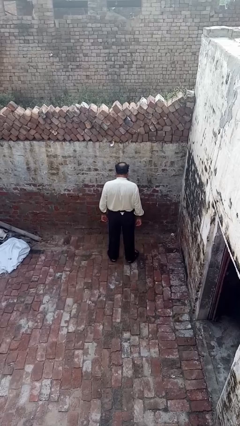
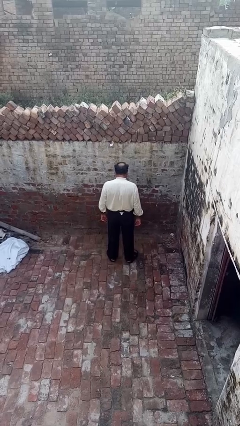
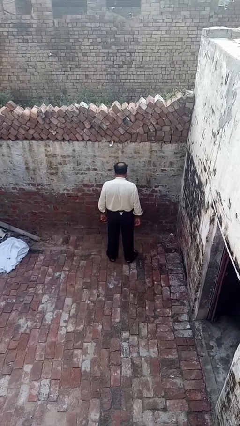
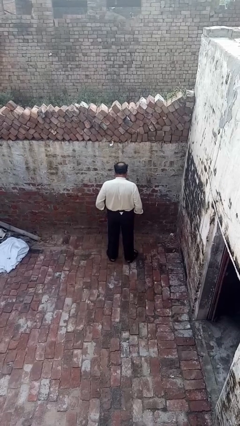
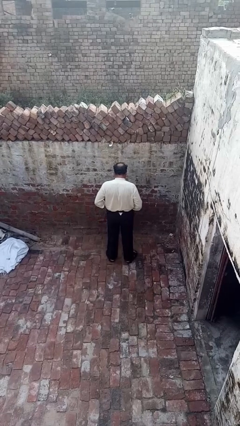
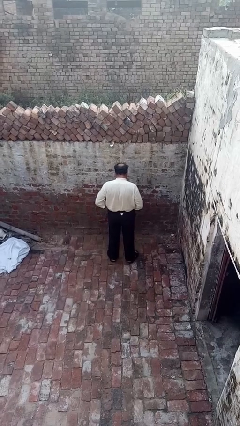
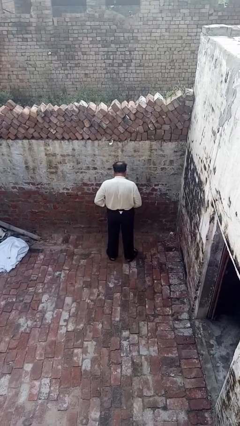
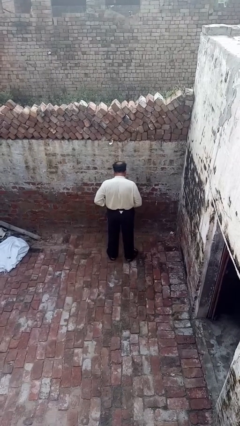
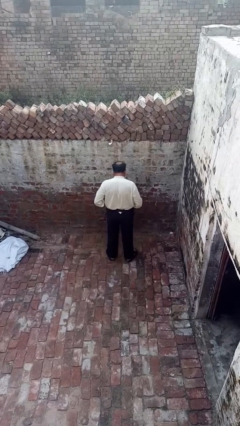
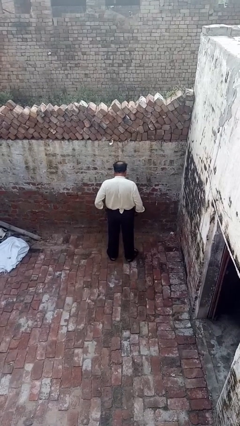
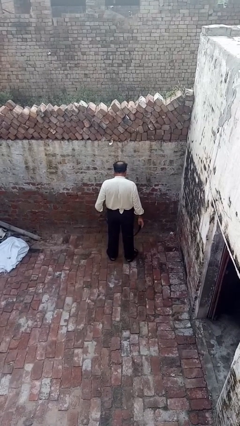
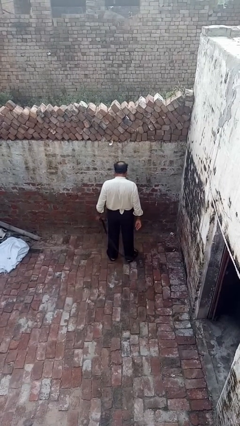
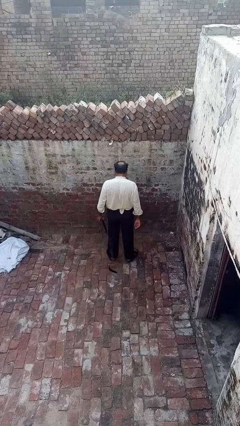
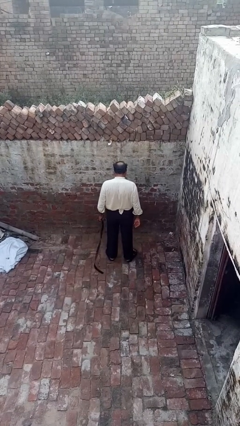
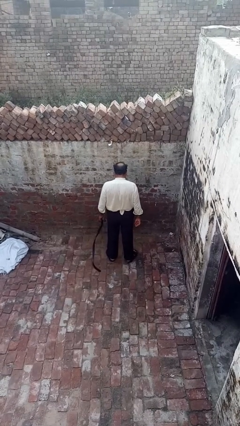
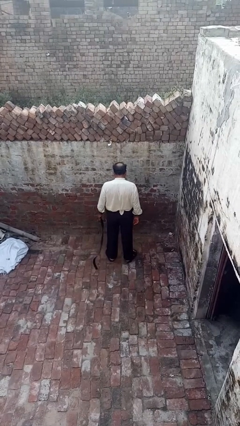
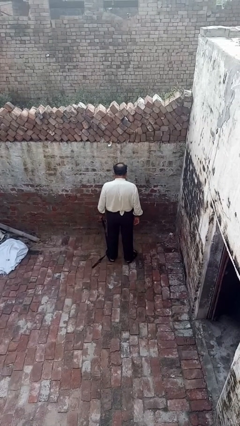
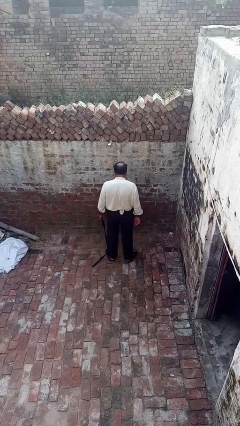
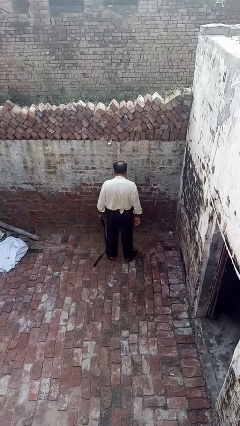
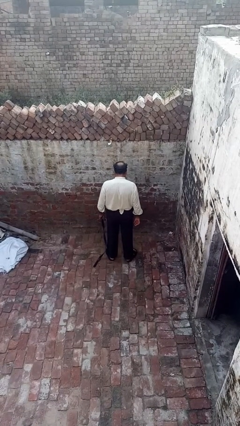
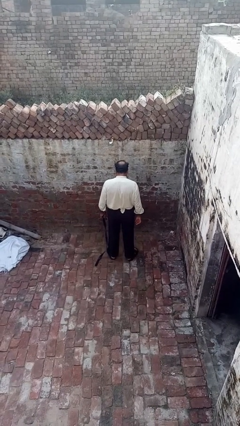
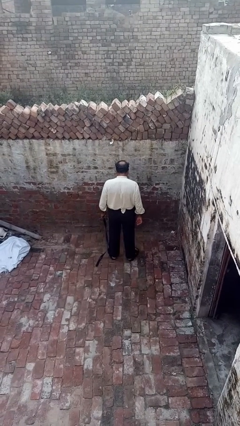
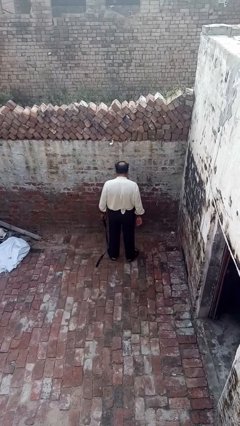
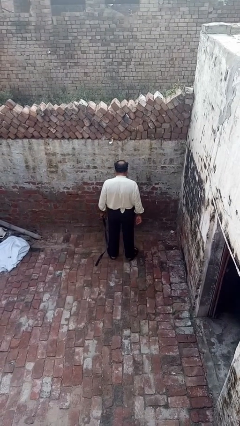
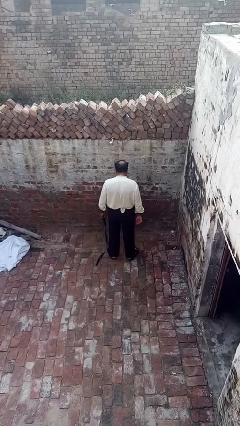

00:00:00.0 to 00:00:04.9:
person takes off belt

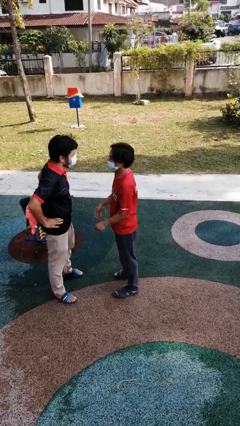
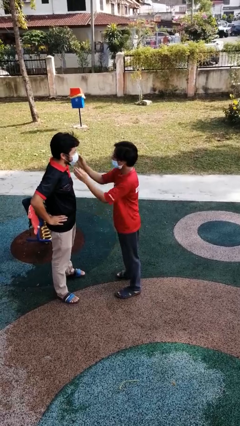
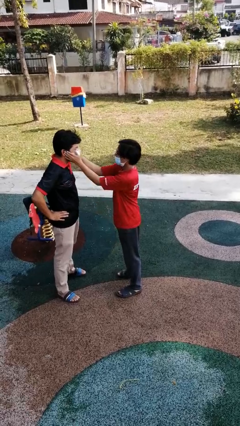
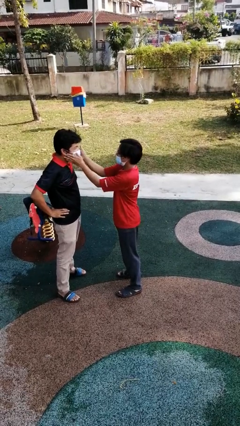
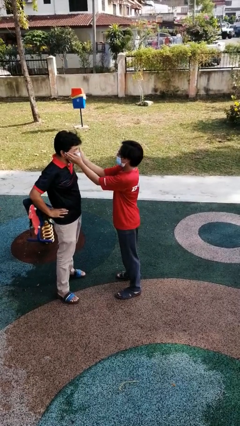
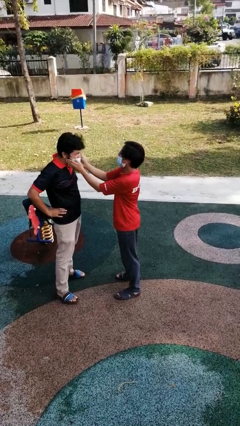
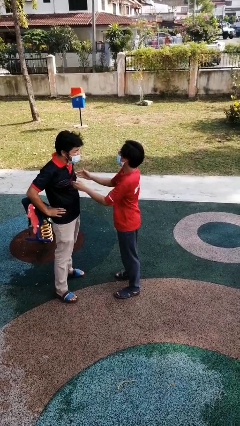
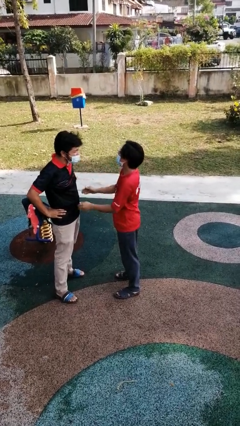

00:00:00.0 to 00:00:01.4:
person touches face of person

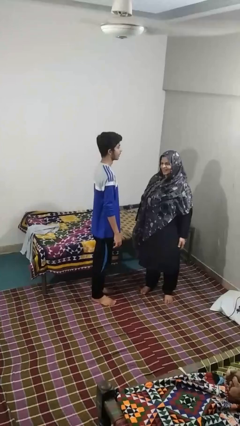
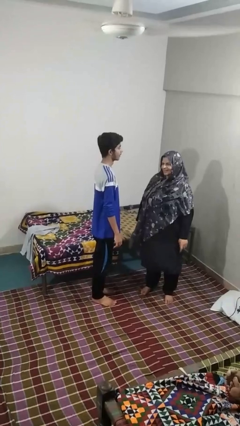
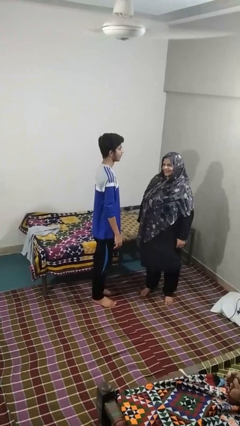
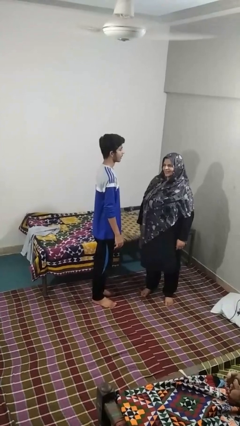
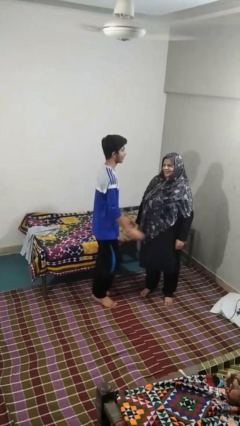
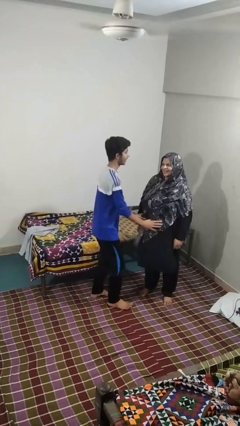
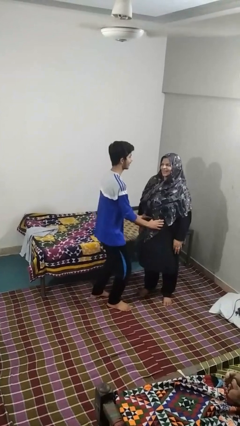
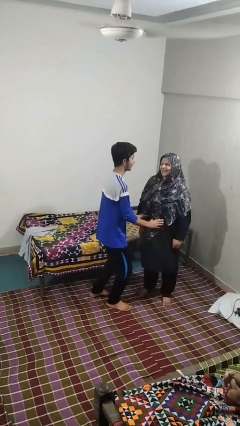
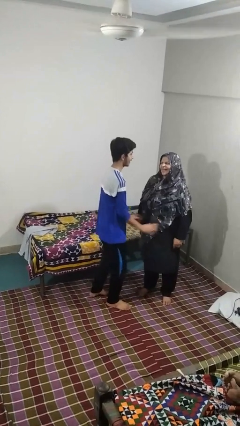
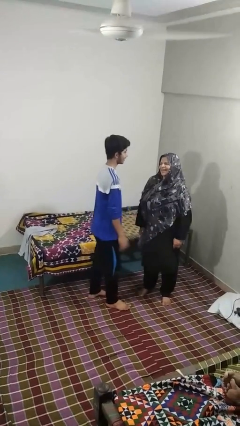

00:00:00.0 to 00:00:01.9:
person tickles person

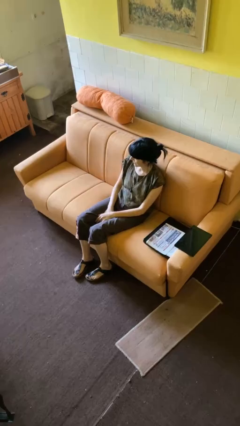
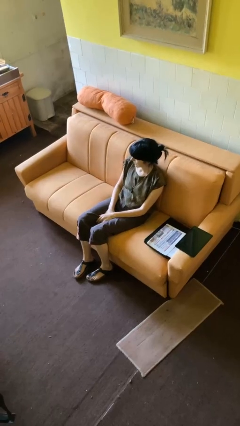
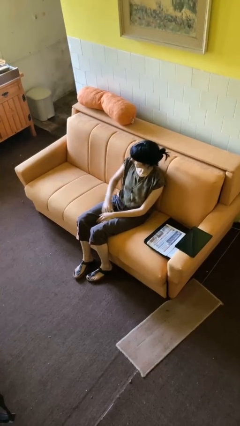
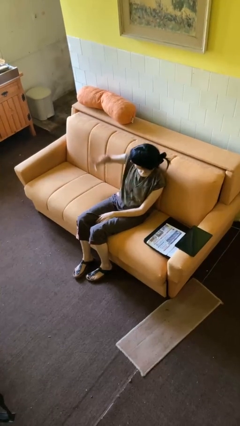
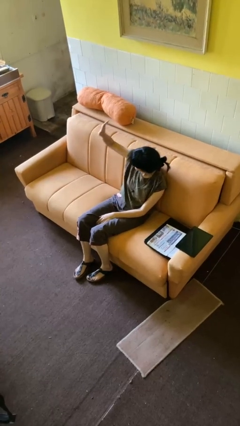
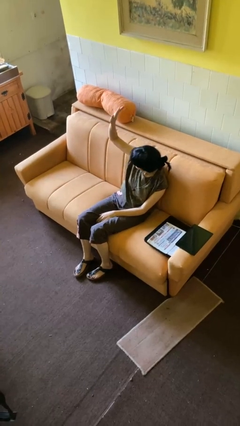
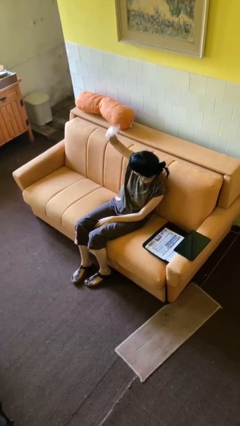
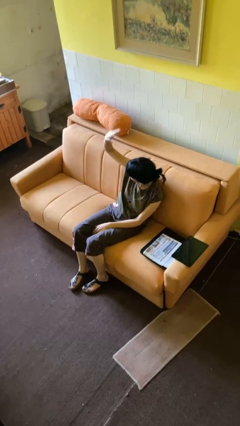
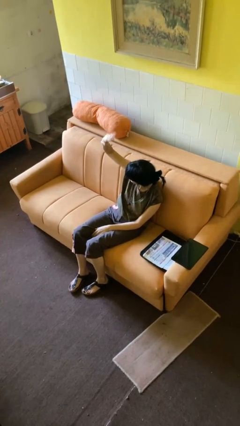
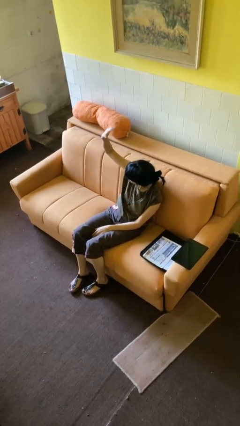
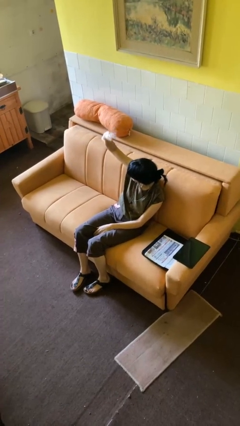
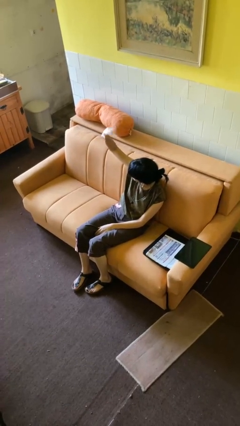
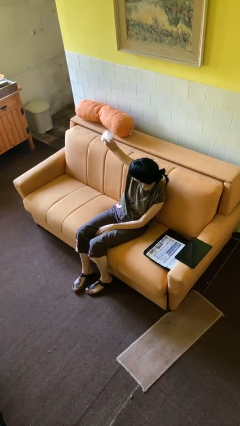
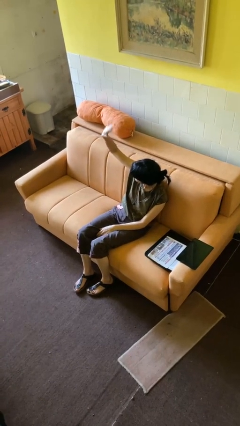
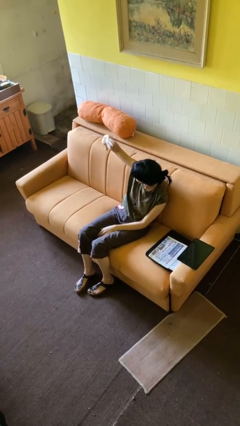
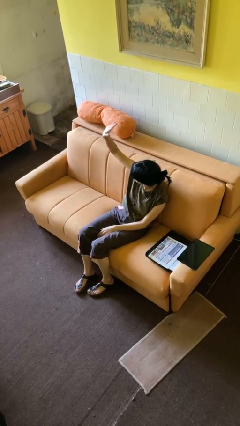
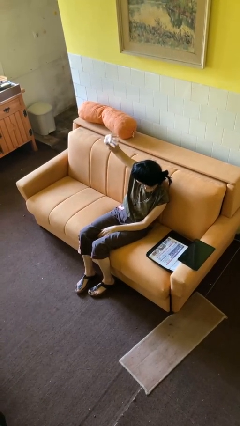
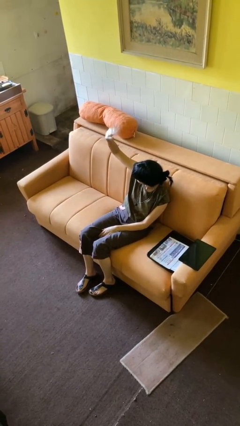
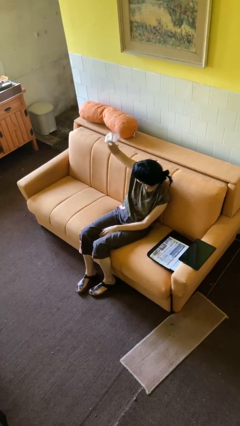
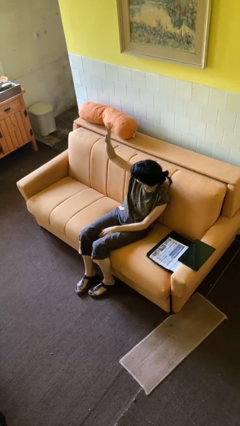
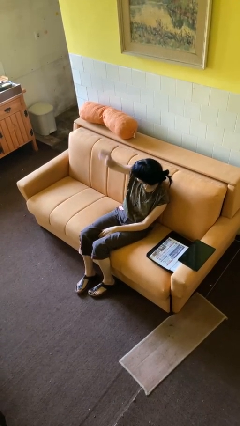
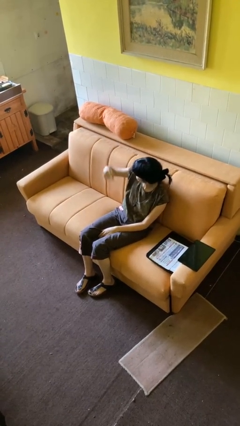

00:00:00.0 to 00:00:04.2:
person waves at person

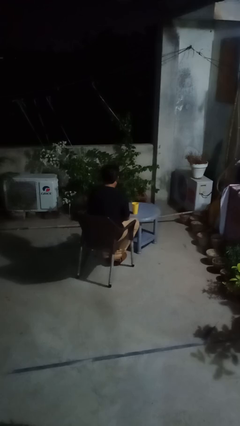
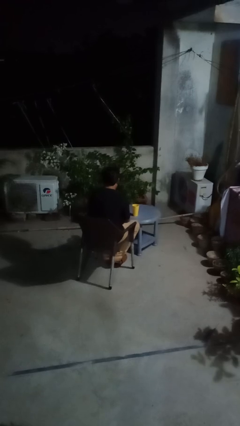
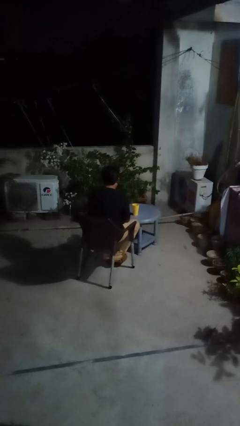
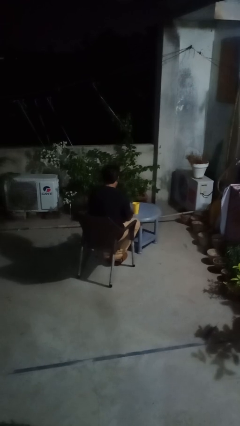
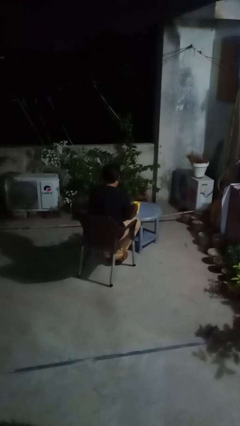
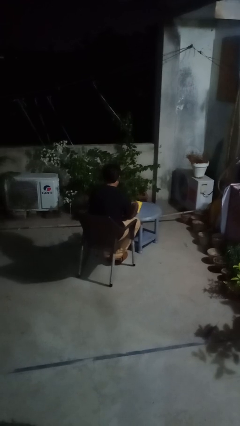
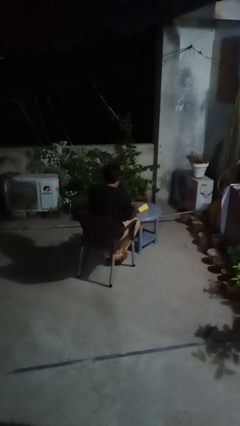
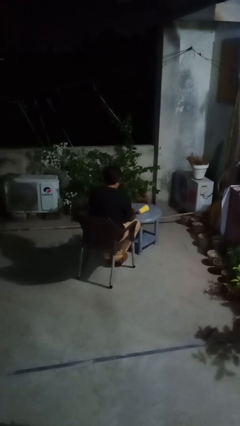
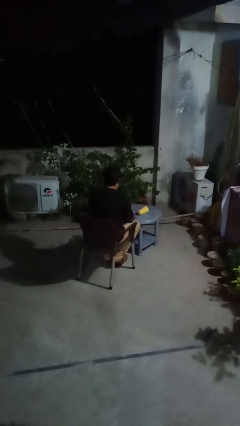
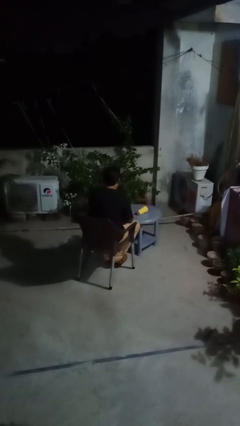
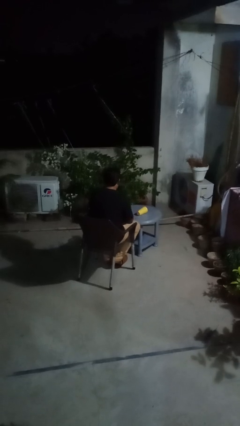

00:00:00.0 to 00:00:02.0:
person knocks over glass

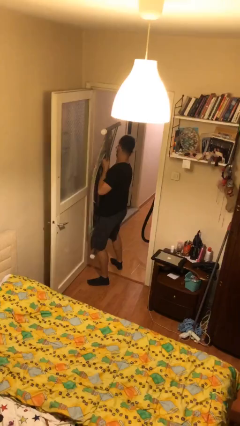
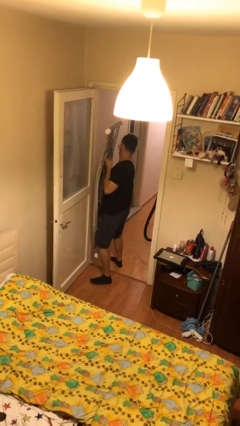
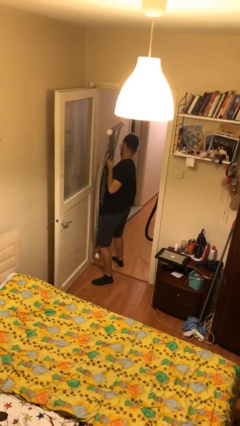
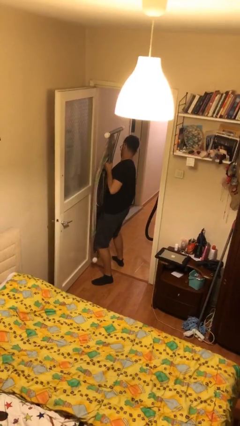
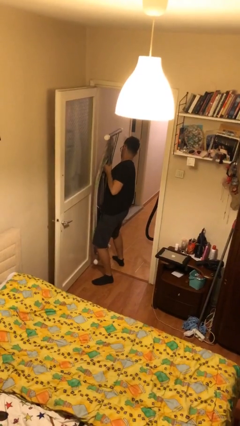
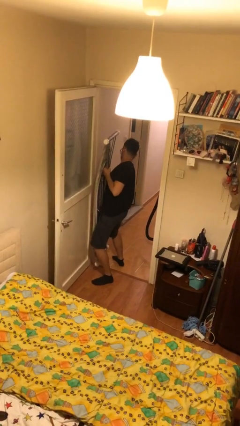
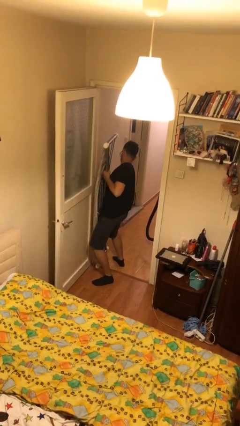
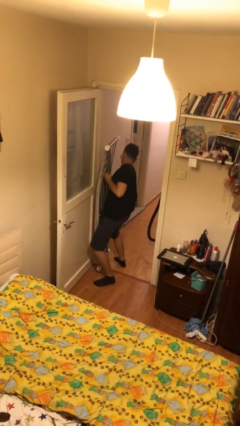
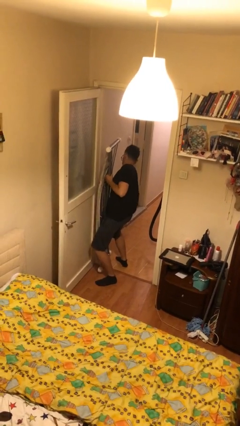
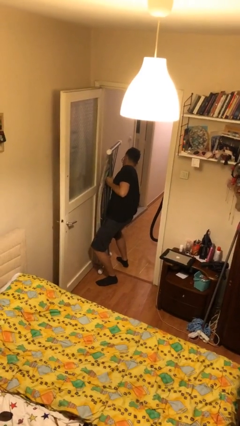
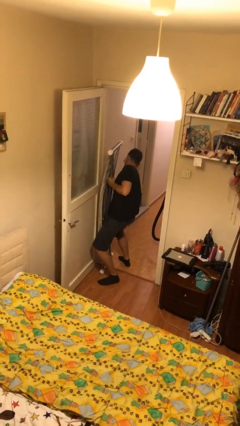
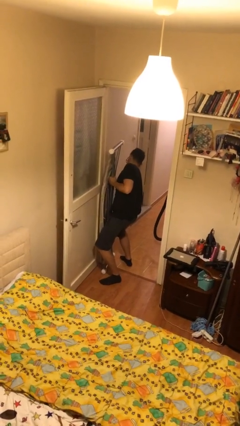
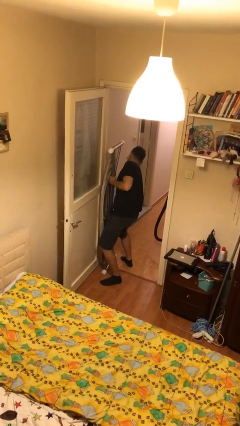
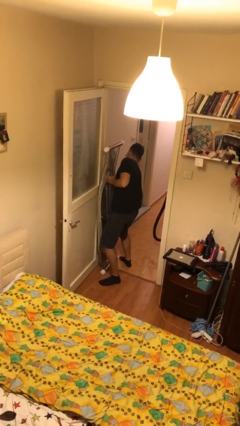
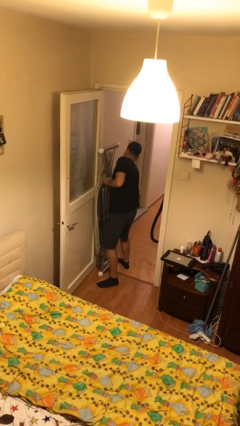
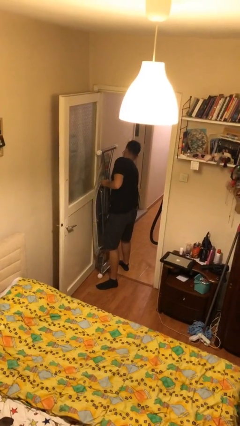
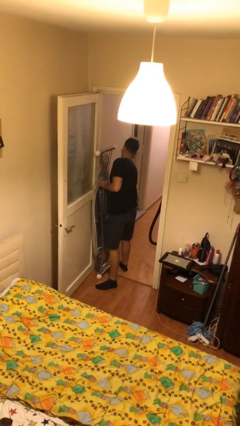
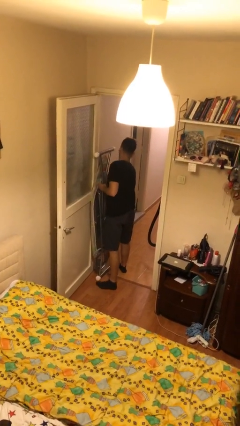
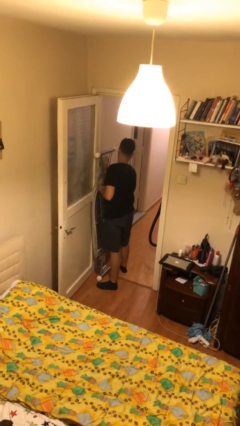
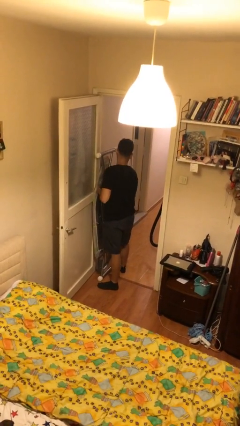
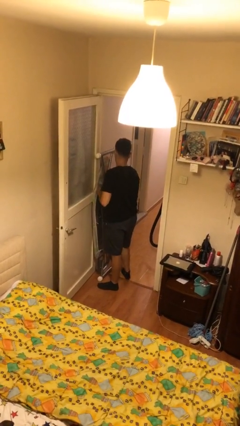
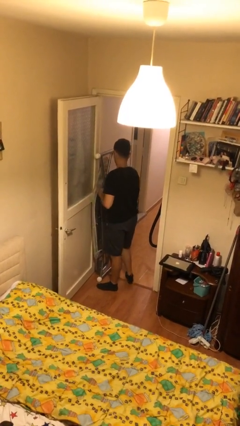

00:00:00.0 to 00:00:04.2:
person puts down object on floor
